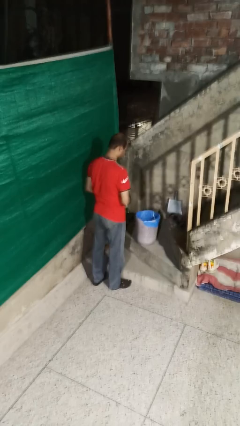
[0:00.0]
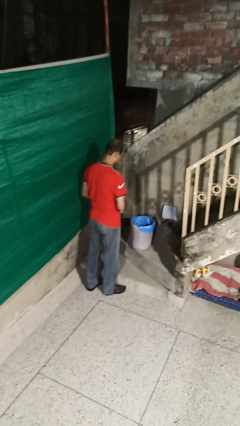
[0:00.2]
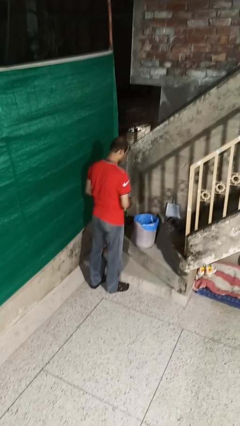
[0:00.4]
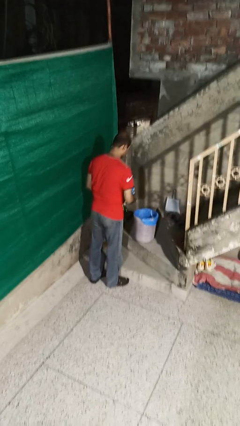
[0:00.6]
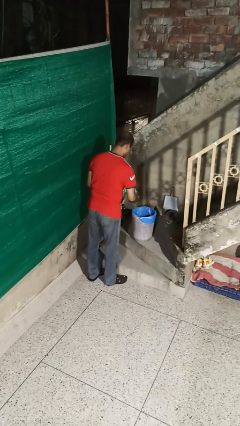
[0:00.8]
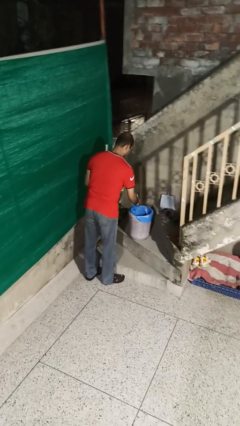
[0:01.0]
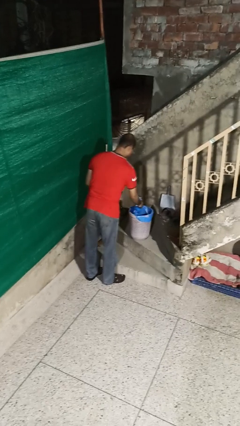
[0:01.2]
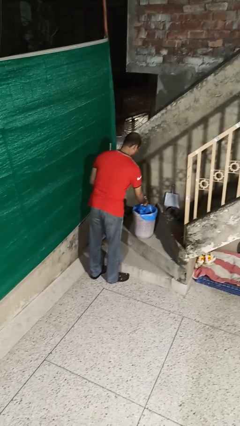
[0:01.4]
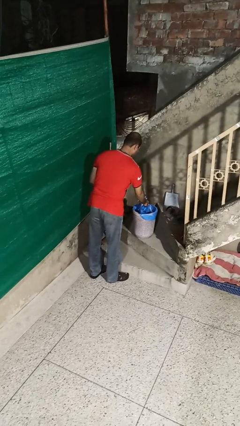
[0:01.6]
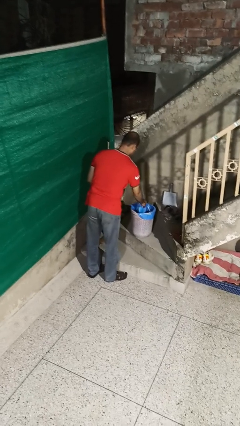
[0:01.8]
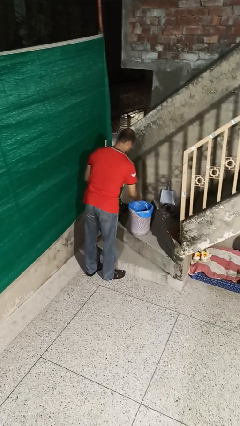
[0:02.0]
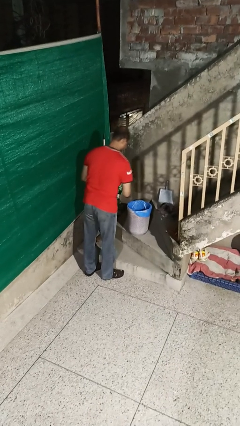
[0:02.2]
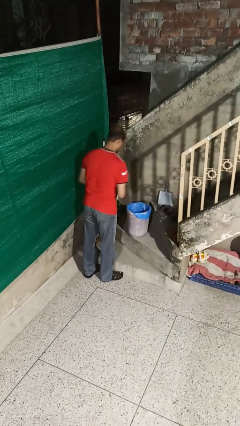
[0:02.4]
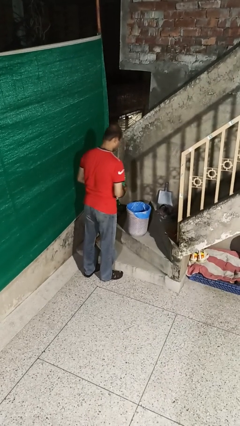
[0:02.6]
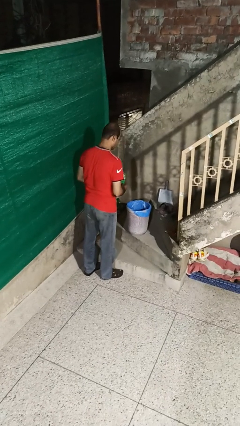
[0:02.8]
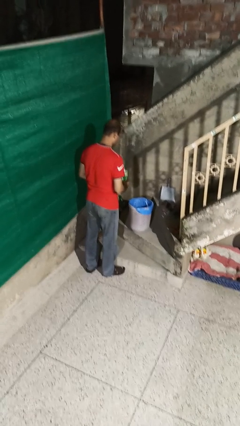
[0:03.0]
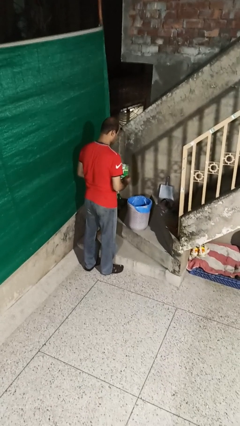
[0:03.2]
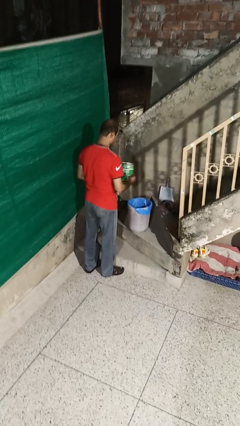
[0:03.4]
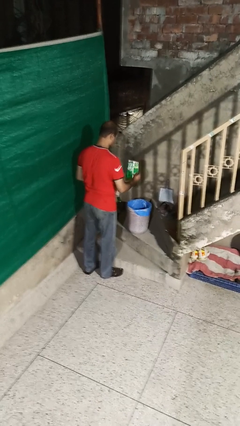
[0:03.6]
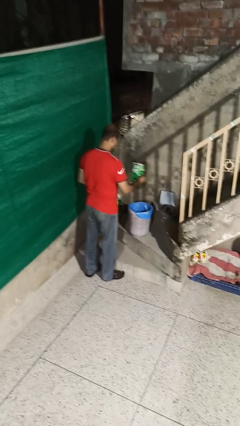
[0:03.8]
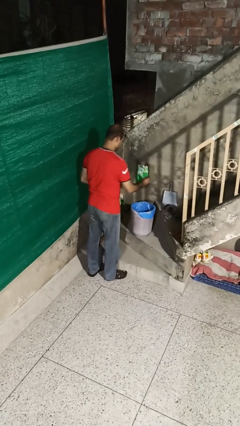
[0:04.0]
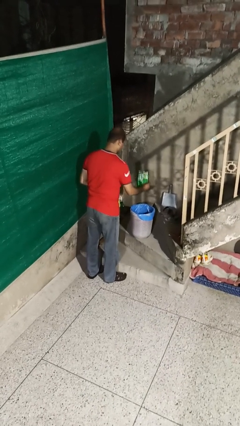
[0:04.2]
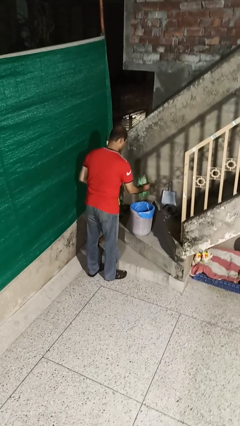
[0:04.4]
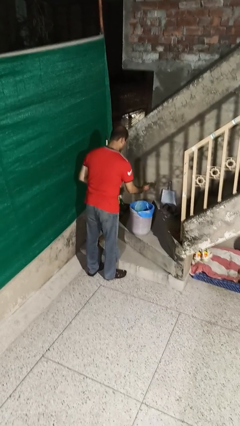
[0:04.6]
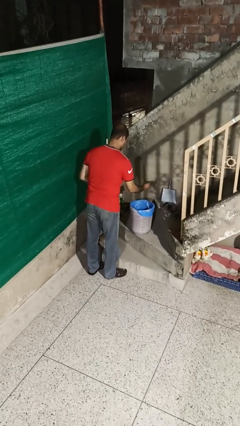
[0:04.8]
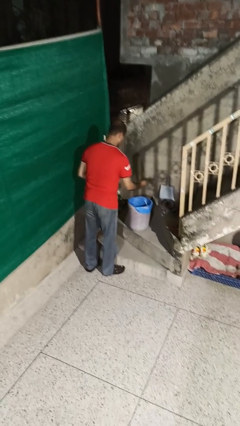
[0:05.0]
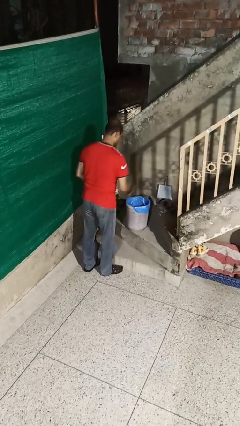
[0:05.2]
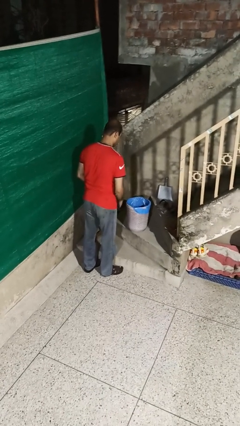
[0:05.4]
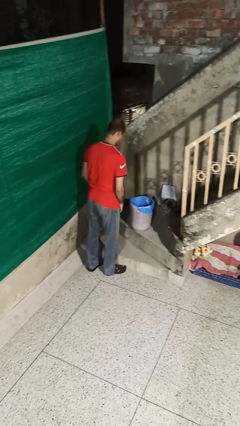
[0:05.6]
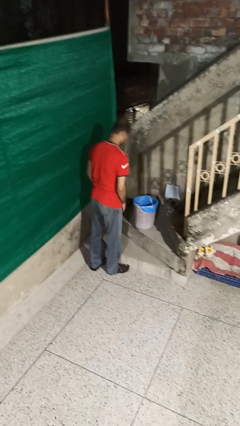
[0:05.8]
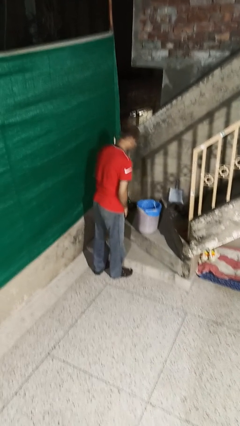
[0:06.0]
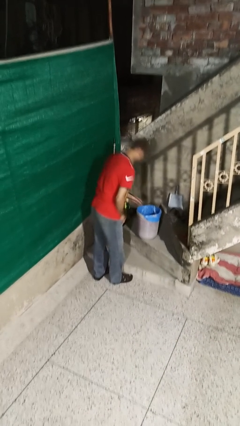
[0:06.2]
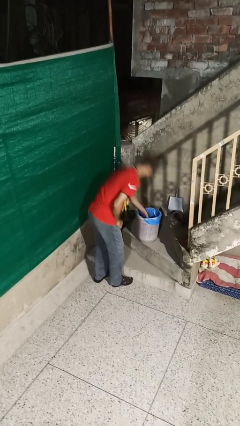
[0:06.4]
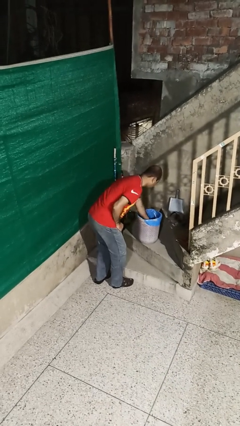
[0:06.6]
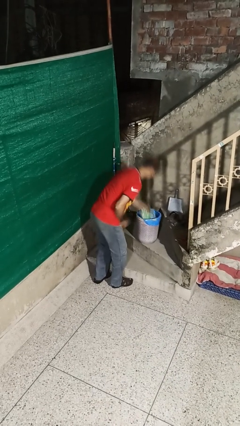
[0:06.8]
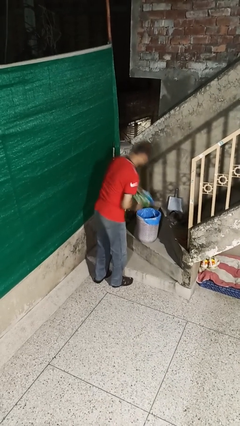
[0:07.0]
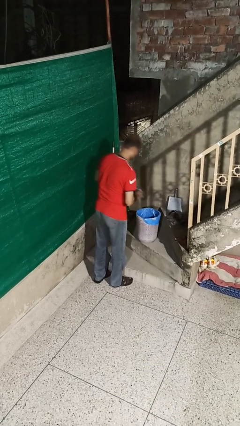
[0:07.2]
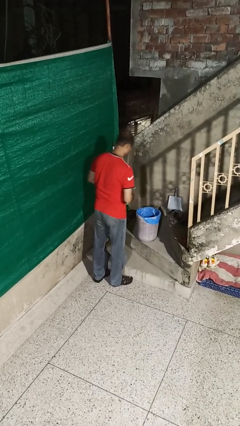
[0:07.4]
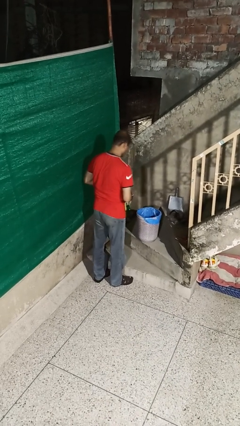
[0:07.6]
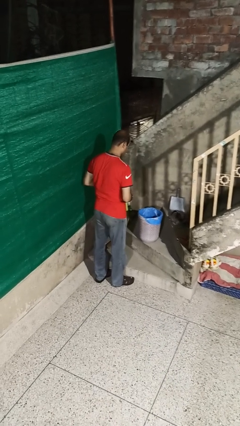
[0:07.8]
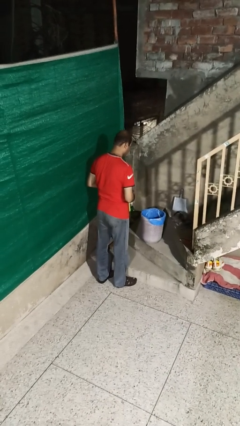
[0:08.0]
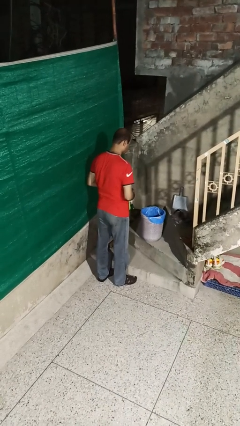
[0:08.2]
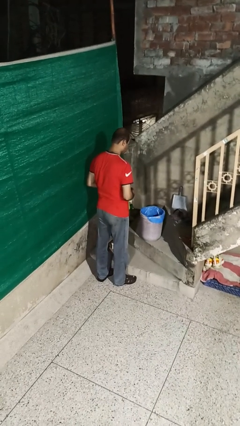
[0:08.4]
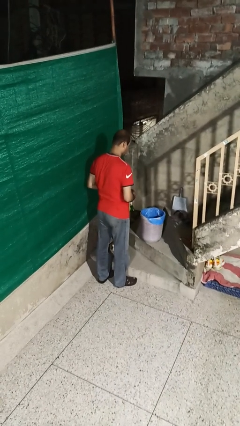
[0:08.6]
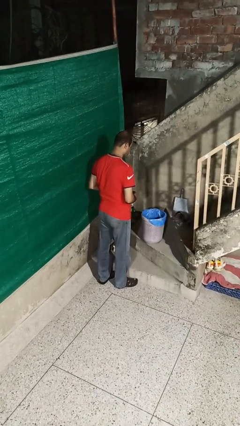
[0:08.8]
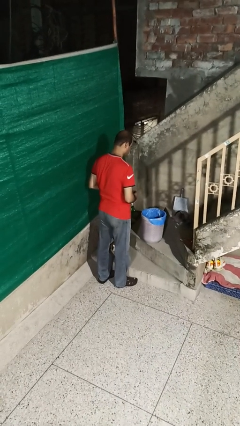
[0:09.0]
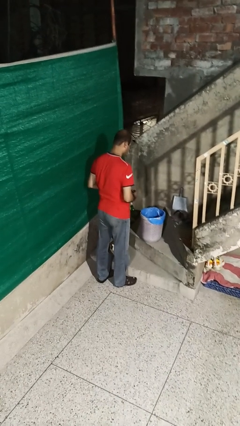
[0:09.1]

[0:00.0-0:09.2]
person discards trash

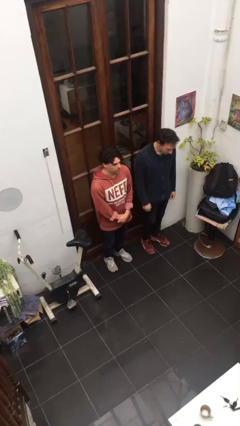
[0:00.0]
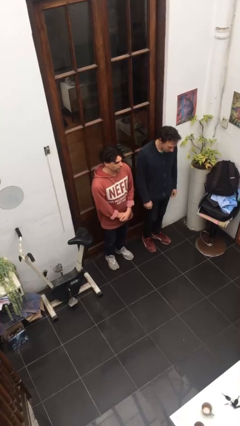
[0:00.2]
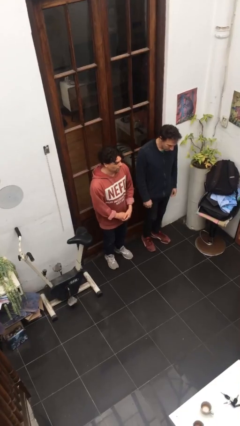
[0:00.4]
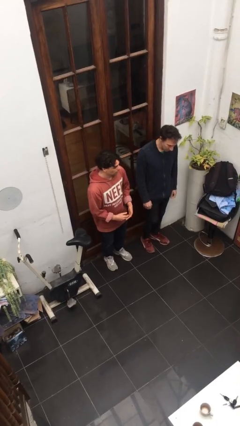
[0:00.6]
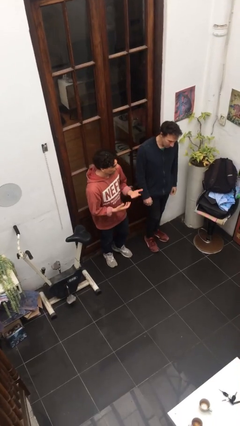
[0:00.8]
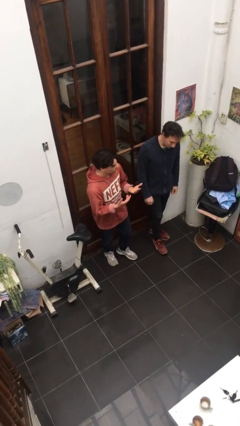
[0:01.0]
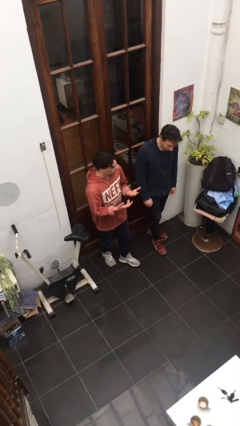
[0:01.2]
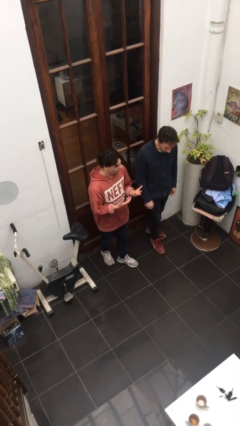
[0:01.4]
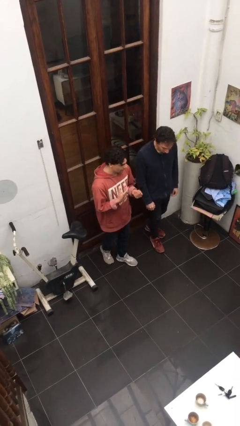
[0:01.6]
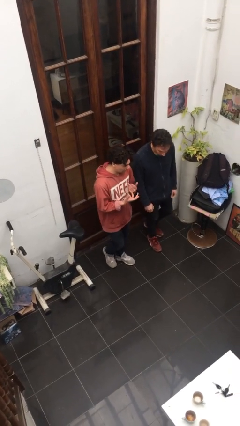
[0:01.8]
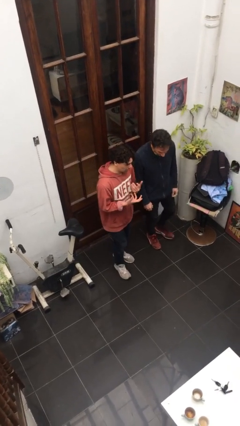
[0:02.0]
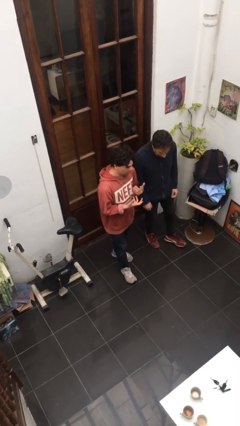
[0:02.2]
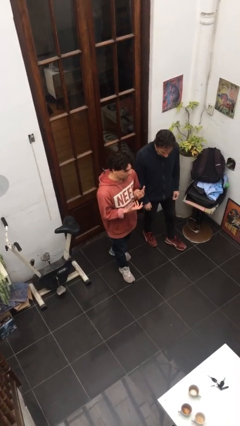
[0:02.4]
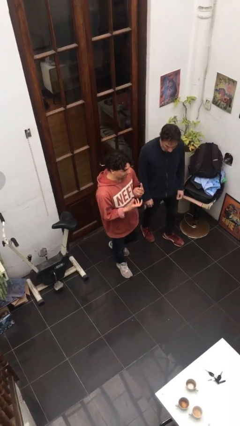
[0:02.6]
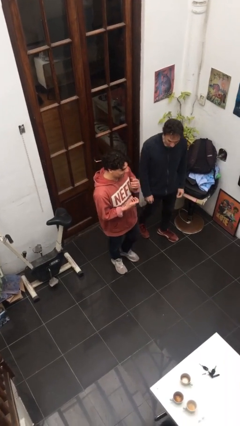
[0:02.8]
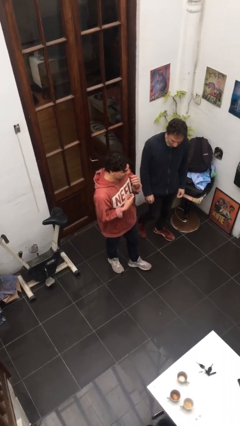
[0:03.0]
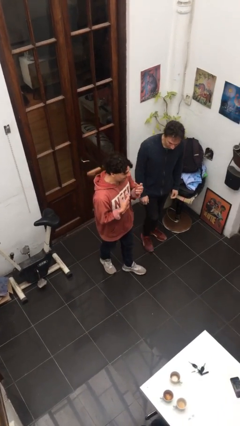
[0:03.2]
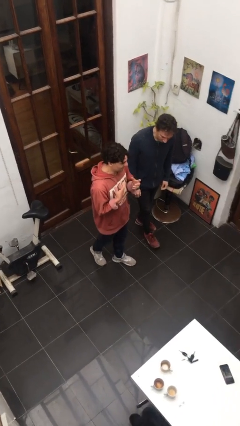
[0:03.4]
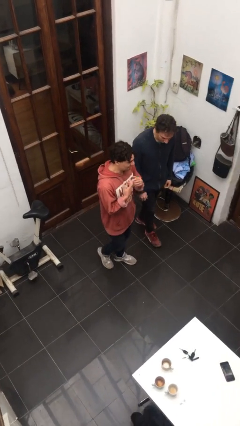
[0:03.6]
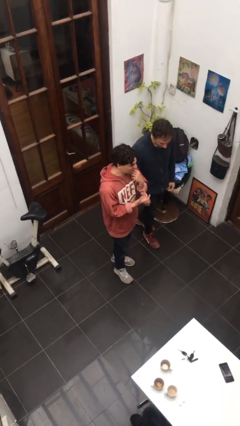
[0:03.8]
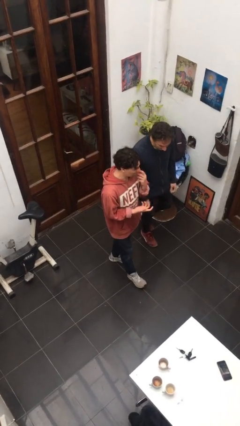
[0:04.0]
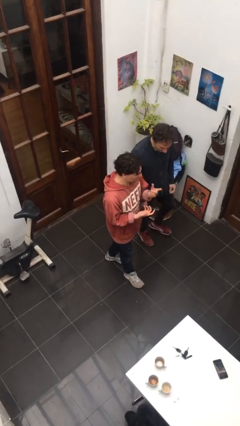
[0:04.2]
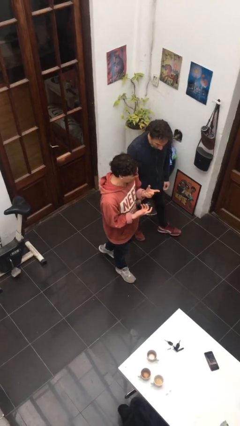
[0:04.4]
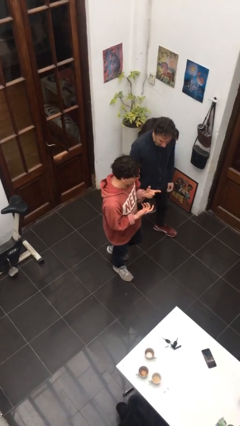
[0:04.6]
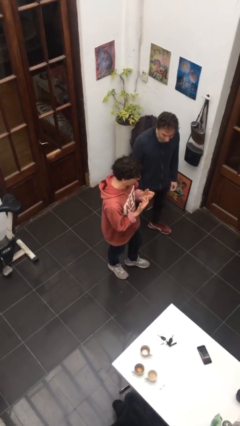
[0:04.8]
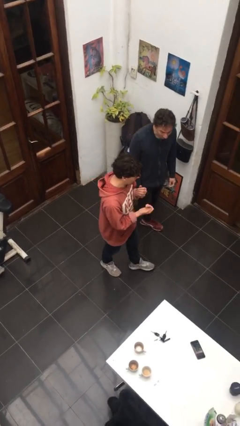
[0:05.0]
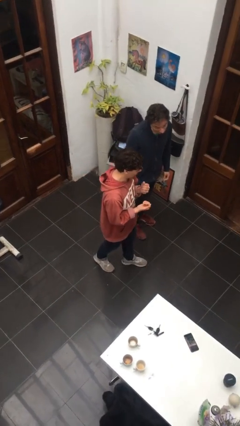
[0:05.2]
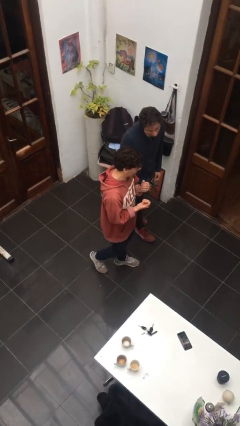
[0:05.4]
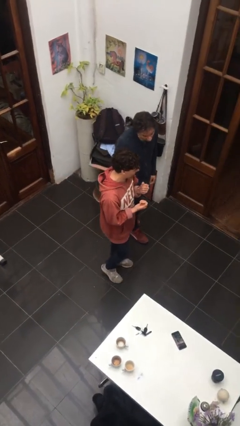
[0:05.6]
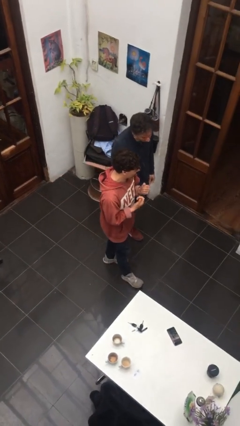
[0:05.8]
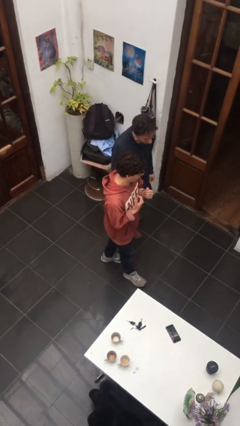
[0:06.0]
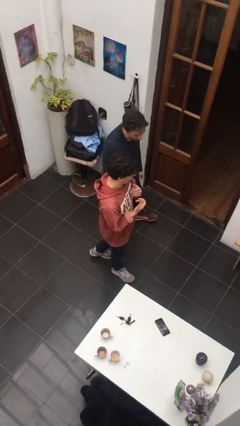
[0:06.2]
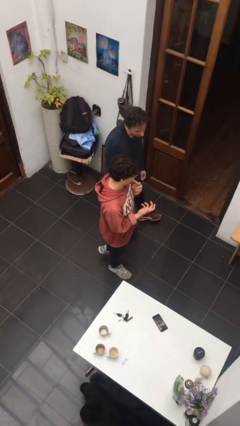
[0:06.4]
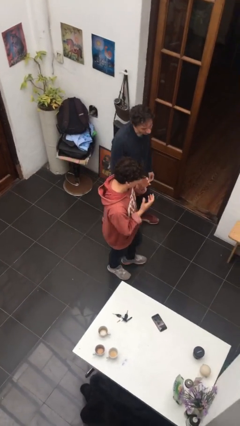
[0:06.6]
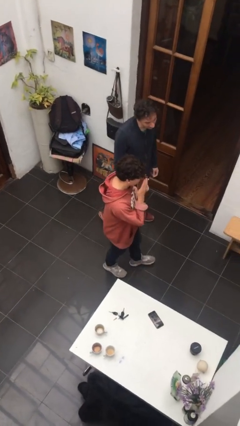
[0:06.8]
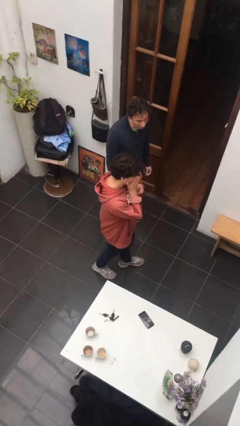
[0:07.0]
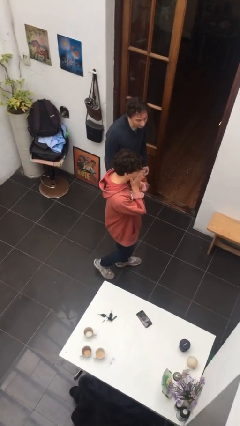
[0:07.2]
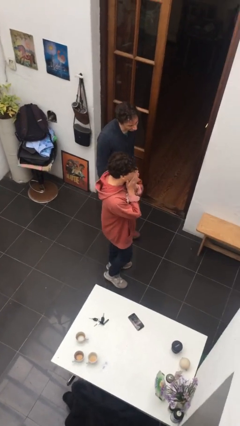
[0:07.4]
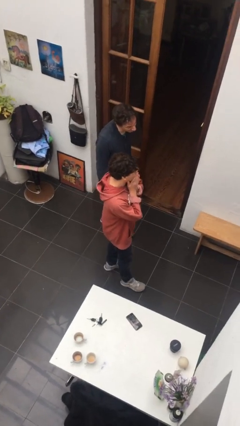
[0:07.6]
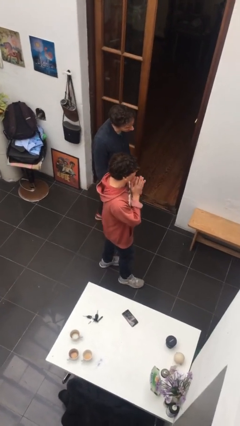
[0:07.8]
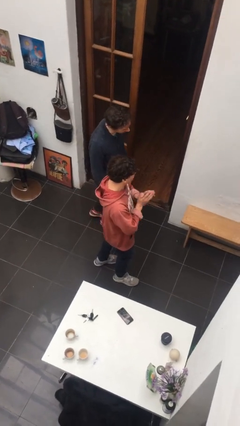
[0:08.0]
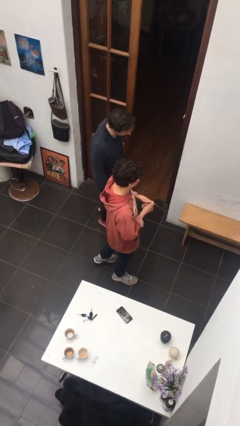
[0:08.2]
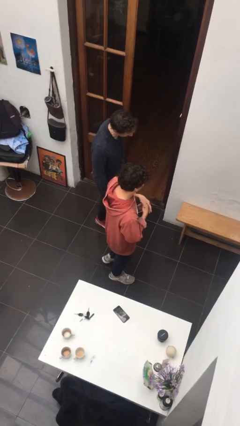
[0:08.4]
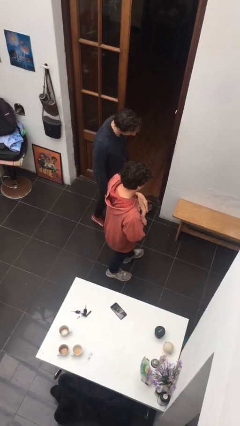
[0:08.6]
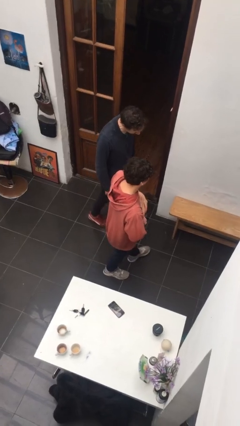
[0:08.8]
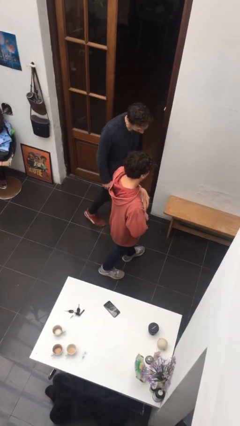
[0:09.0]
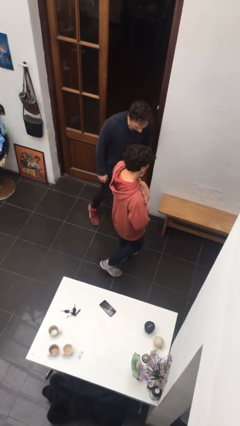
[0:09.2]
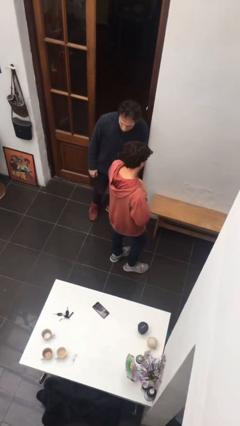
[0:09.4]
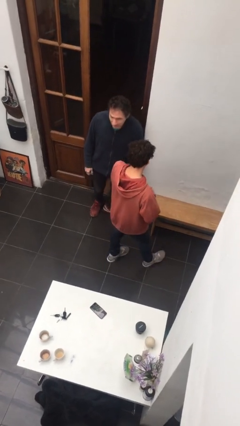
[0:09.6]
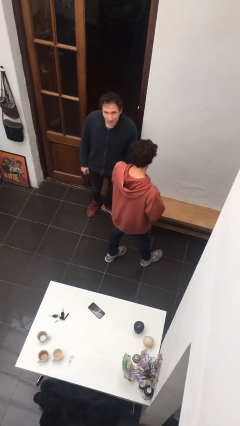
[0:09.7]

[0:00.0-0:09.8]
person talks to person
